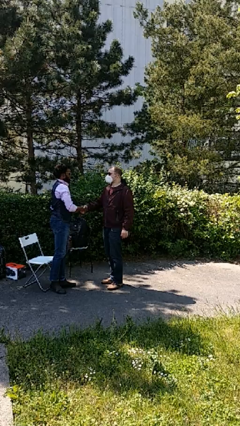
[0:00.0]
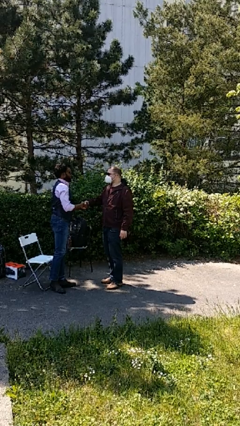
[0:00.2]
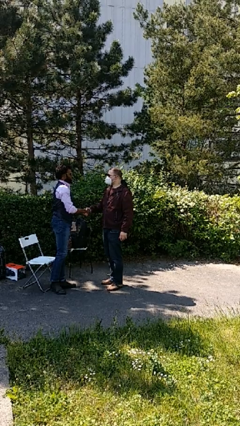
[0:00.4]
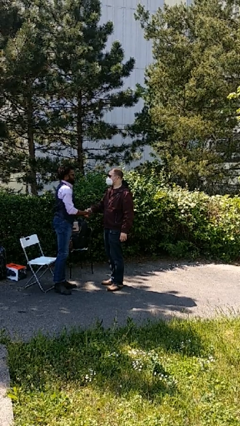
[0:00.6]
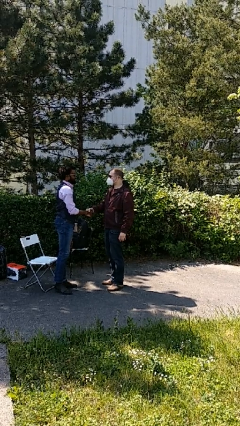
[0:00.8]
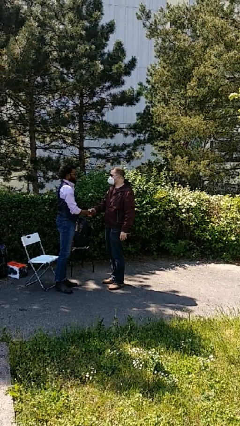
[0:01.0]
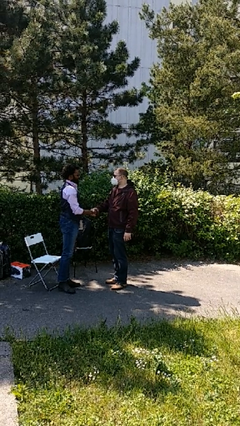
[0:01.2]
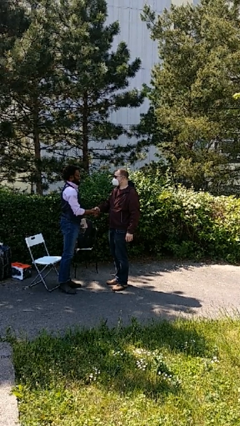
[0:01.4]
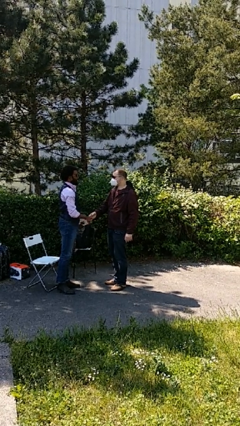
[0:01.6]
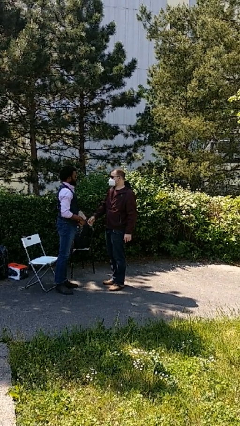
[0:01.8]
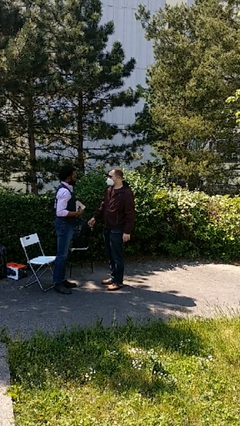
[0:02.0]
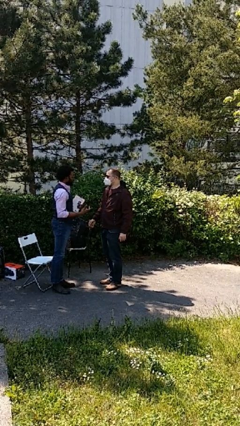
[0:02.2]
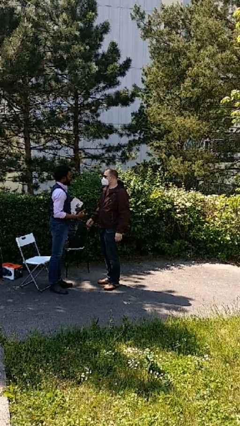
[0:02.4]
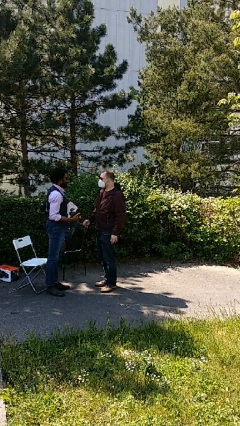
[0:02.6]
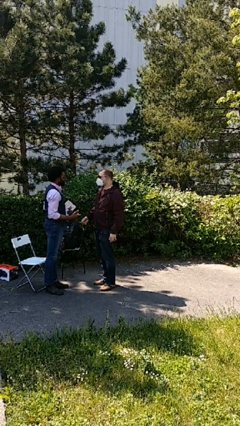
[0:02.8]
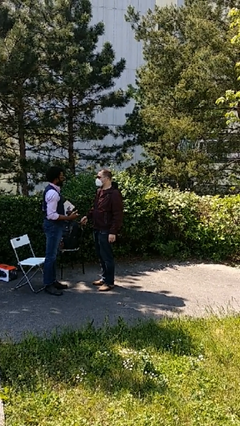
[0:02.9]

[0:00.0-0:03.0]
person highfives hand

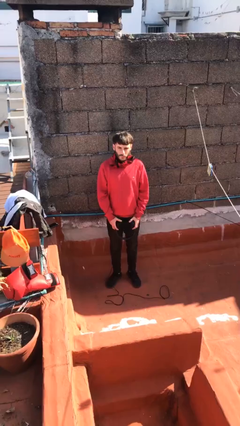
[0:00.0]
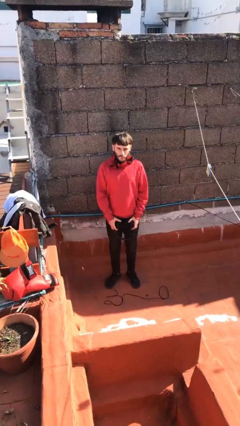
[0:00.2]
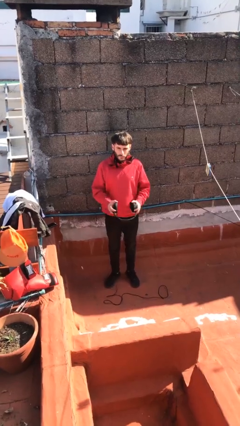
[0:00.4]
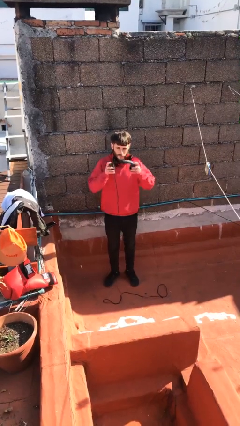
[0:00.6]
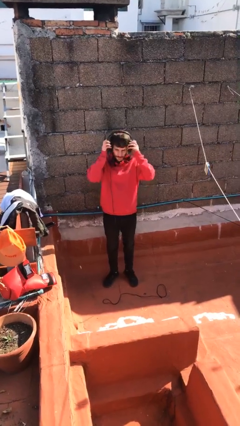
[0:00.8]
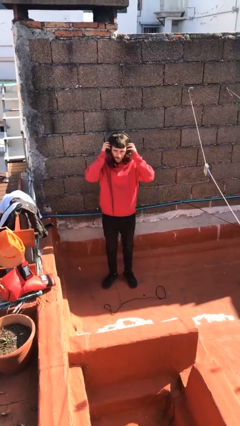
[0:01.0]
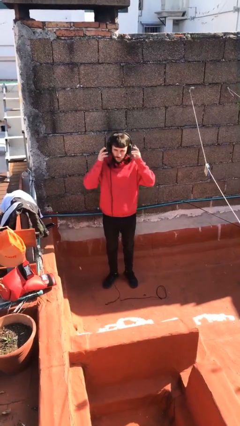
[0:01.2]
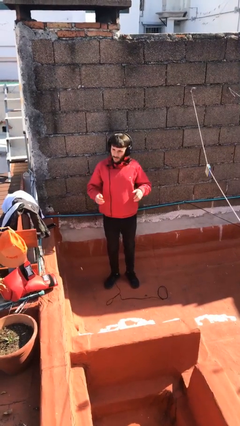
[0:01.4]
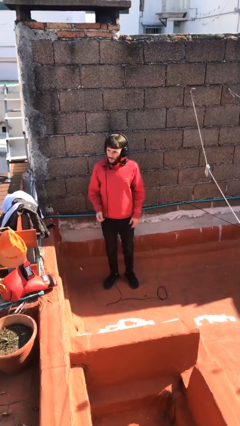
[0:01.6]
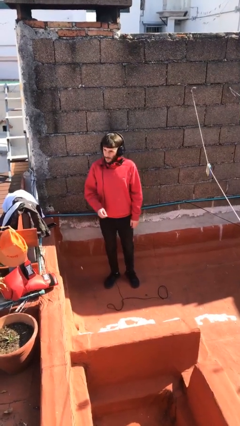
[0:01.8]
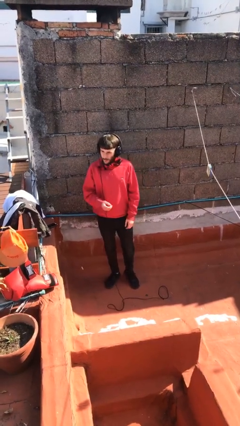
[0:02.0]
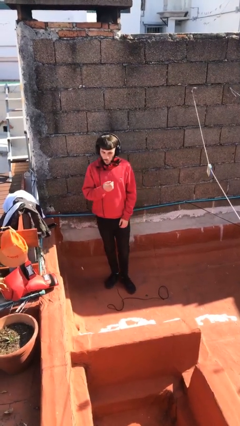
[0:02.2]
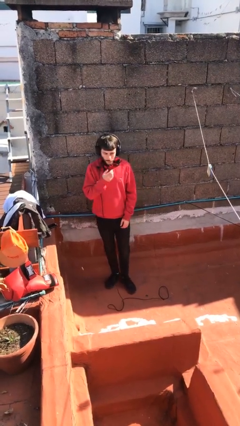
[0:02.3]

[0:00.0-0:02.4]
person puts on headphones

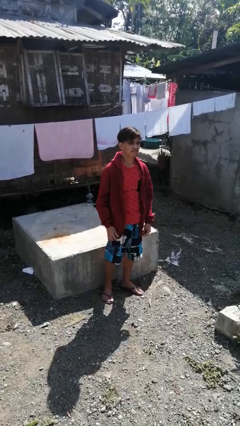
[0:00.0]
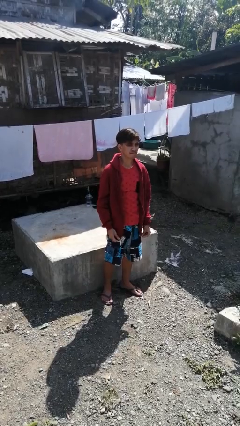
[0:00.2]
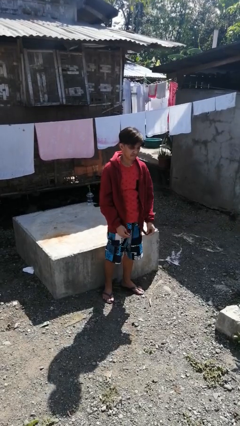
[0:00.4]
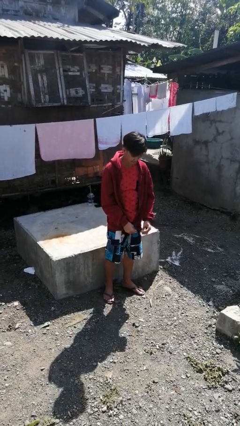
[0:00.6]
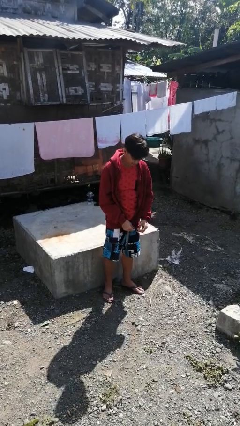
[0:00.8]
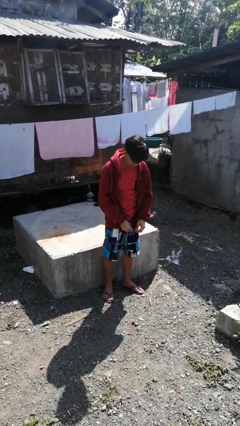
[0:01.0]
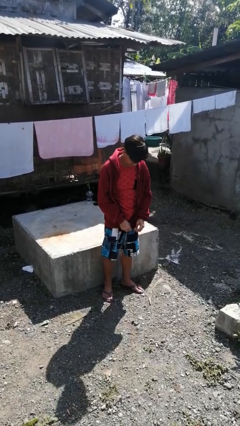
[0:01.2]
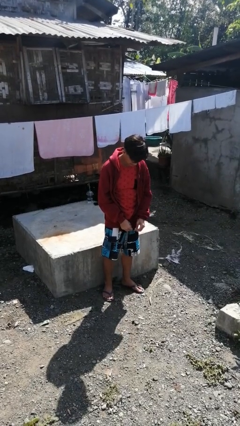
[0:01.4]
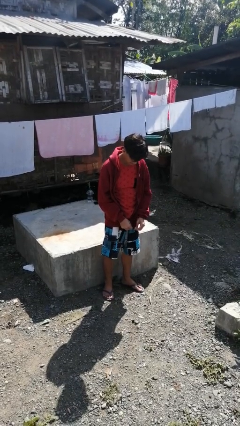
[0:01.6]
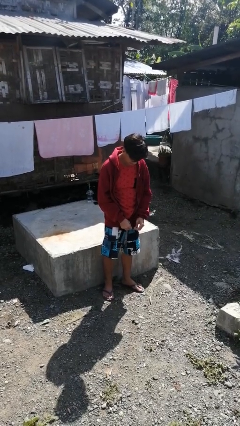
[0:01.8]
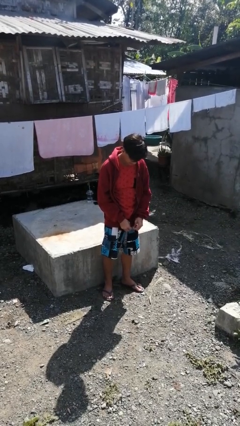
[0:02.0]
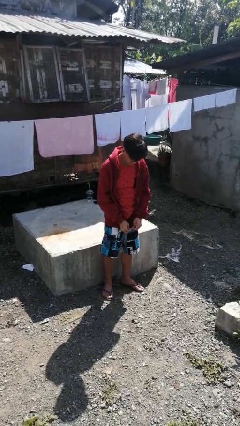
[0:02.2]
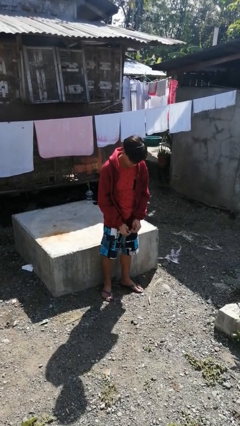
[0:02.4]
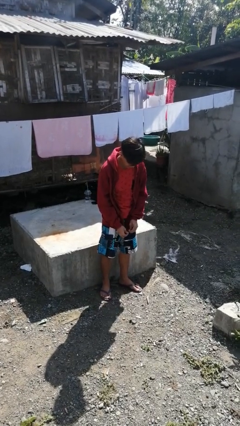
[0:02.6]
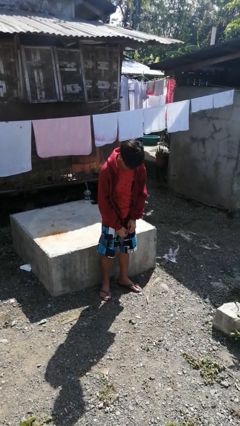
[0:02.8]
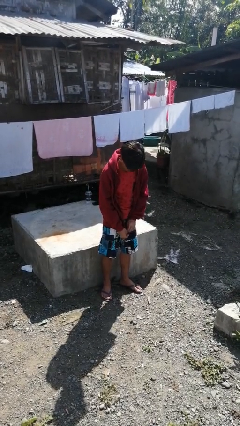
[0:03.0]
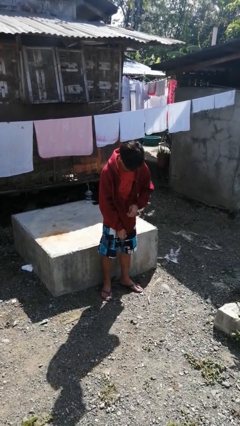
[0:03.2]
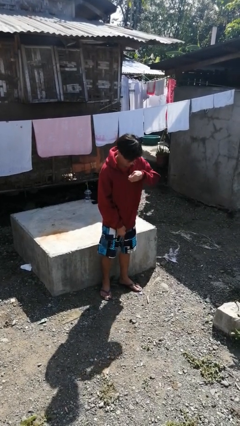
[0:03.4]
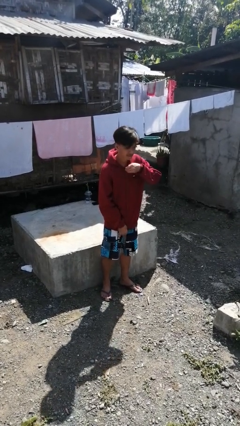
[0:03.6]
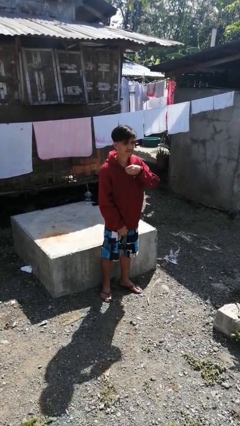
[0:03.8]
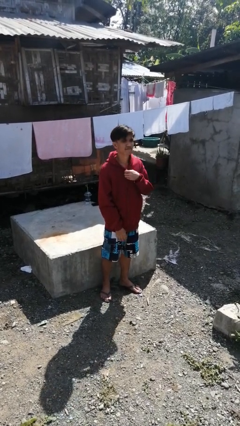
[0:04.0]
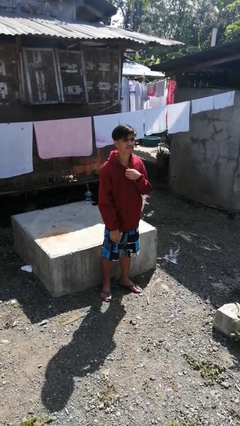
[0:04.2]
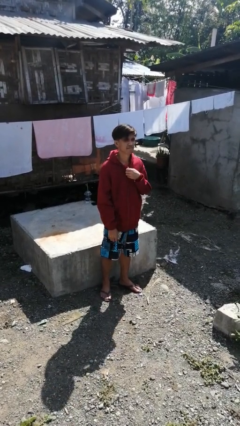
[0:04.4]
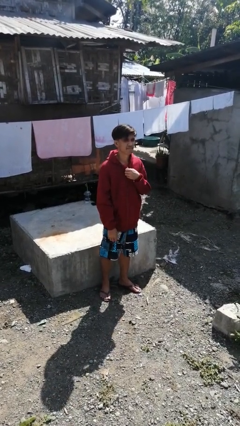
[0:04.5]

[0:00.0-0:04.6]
person zips up jacket

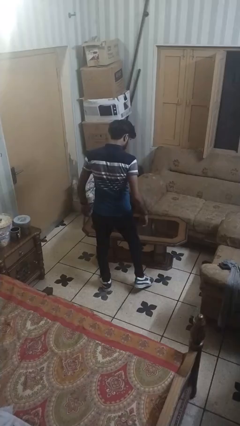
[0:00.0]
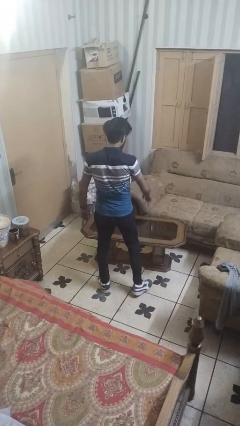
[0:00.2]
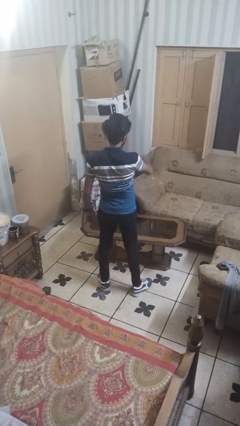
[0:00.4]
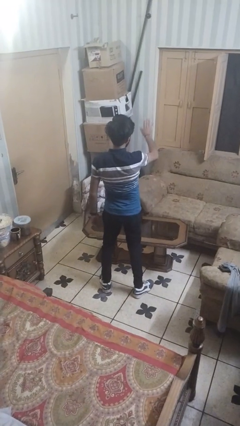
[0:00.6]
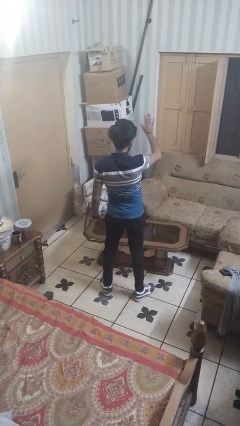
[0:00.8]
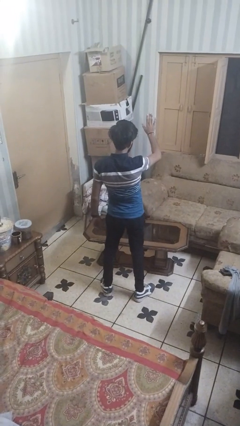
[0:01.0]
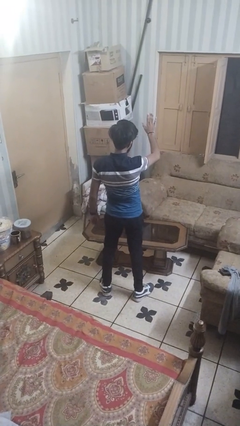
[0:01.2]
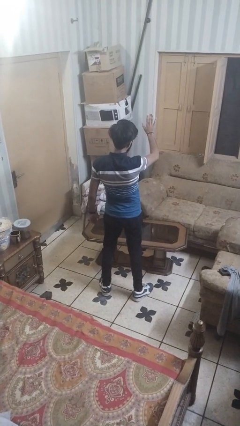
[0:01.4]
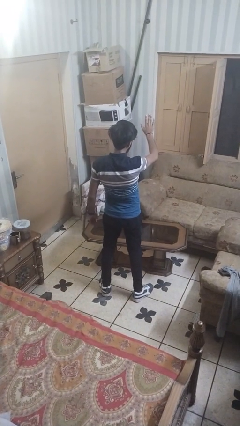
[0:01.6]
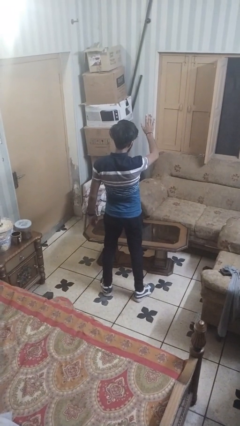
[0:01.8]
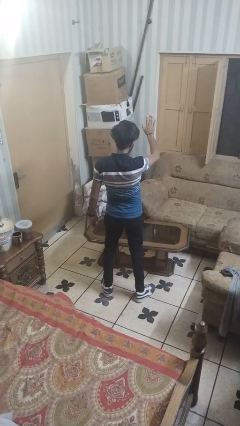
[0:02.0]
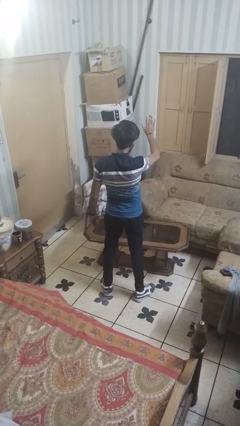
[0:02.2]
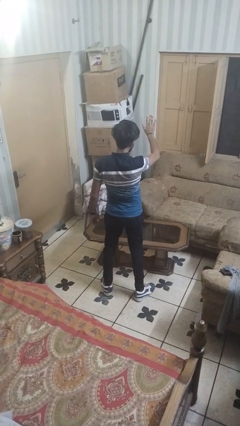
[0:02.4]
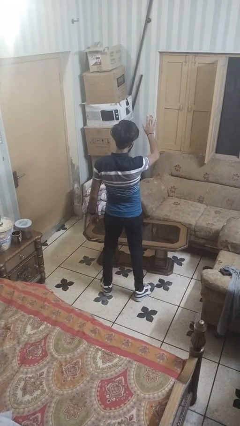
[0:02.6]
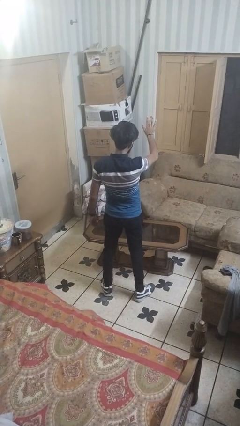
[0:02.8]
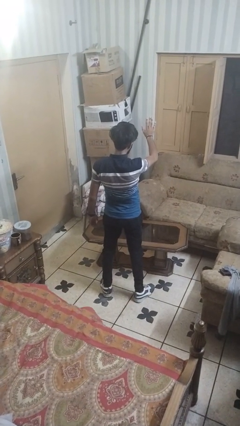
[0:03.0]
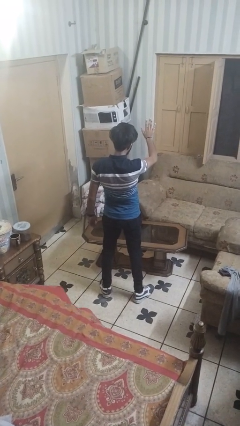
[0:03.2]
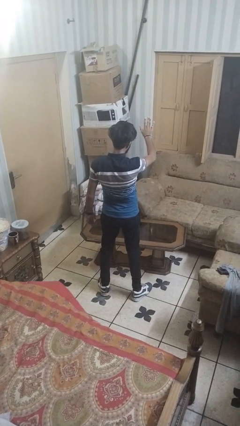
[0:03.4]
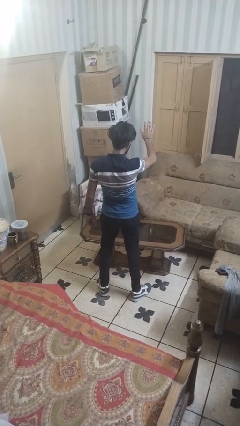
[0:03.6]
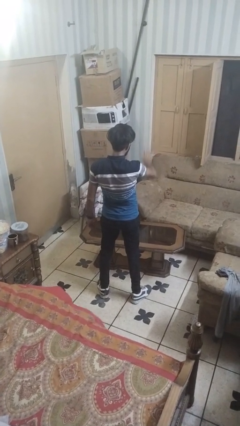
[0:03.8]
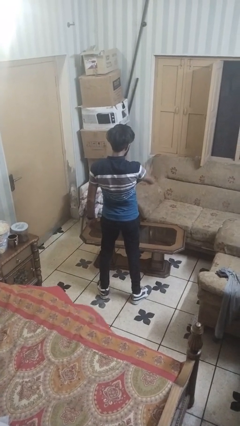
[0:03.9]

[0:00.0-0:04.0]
person gestures stop

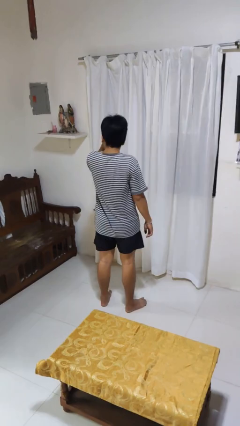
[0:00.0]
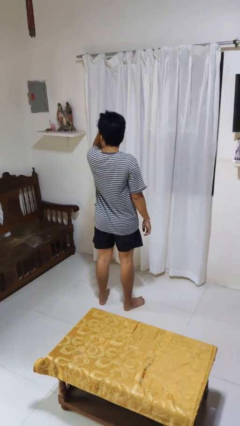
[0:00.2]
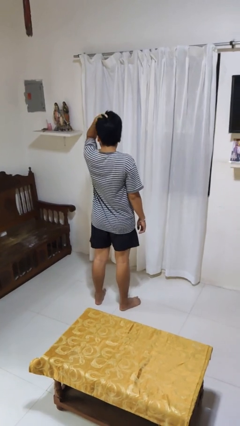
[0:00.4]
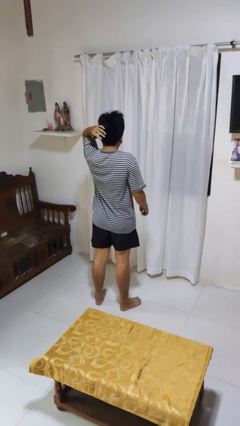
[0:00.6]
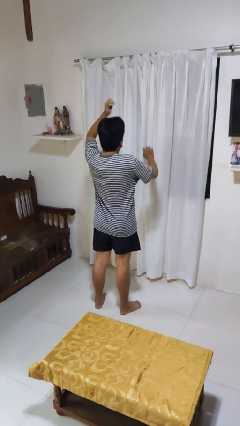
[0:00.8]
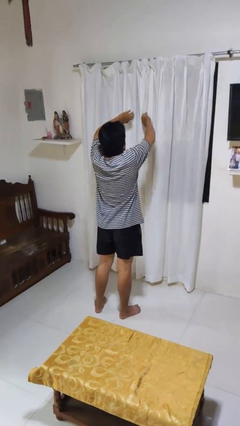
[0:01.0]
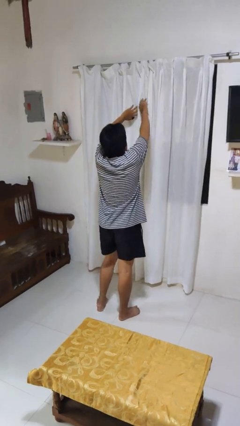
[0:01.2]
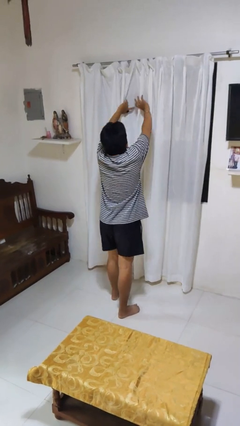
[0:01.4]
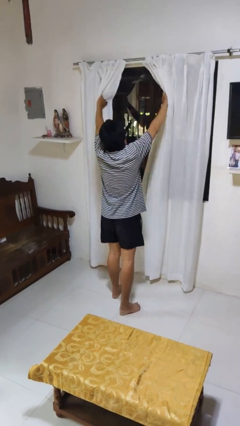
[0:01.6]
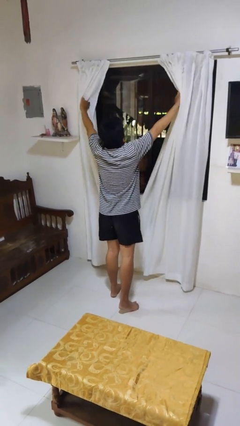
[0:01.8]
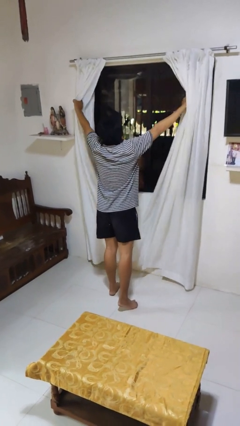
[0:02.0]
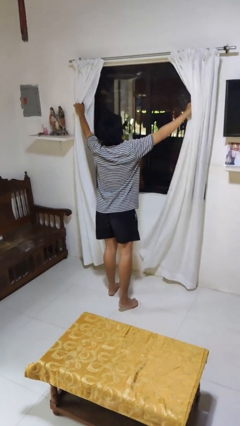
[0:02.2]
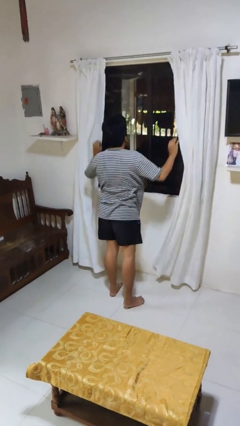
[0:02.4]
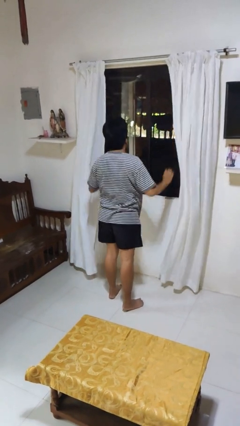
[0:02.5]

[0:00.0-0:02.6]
person opens curtains

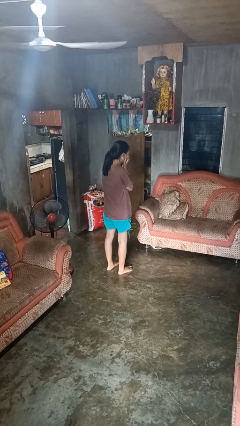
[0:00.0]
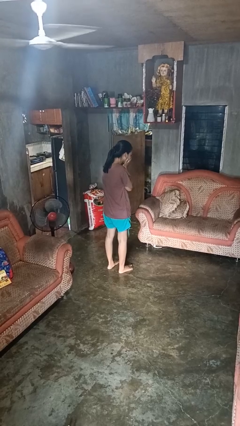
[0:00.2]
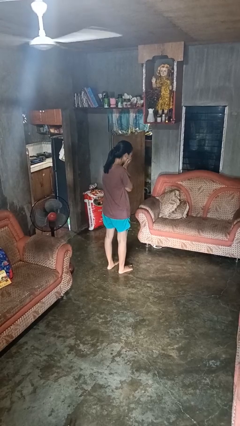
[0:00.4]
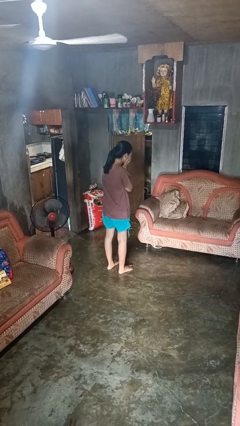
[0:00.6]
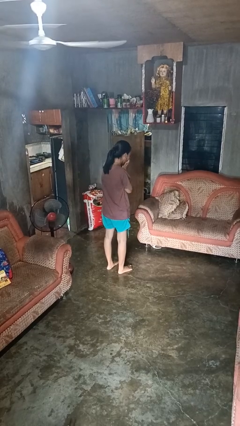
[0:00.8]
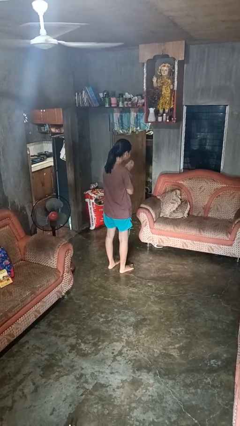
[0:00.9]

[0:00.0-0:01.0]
person sneezes into hand
